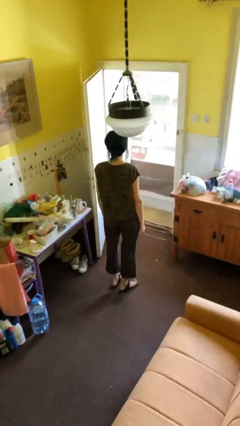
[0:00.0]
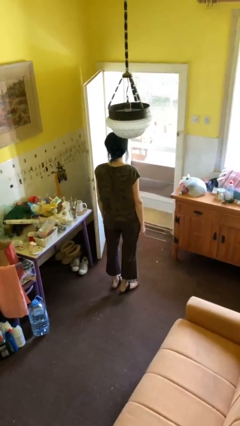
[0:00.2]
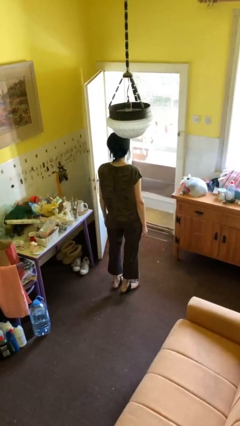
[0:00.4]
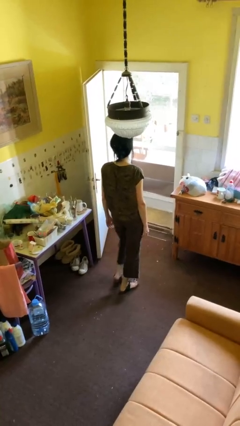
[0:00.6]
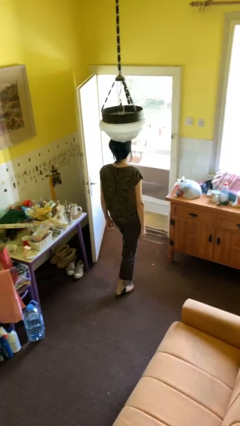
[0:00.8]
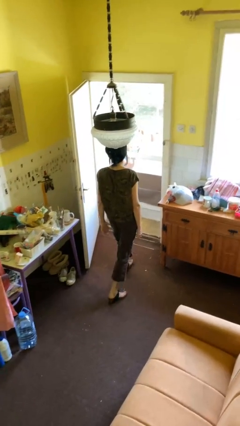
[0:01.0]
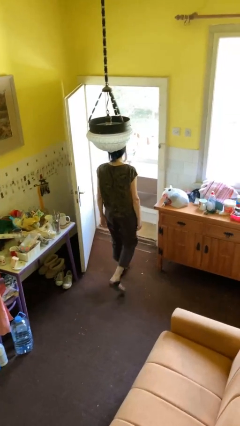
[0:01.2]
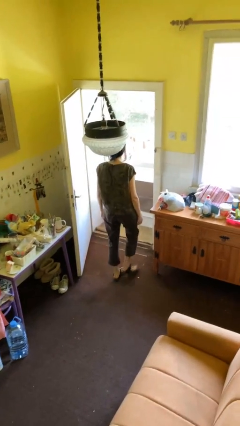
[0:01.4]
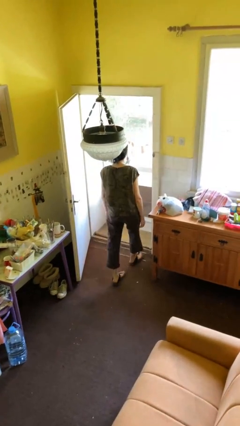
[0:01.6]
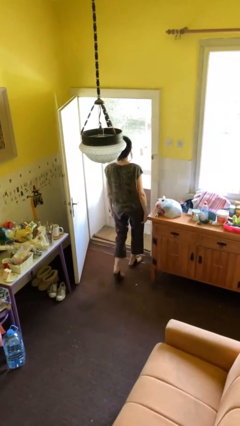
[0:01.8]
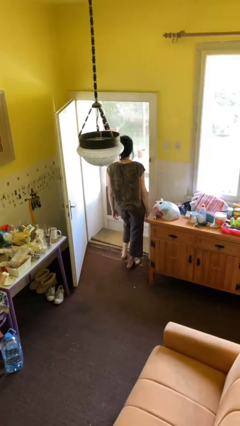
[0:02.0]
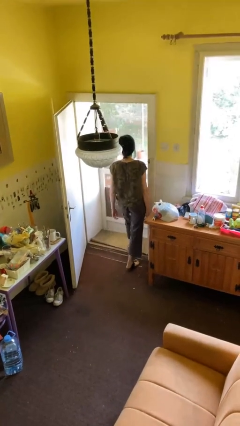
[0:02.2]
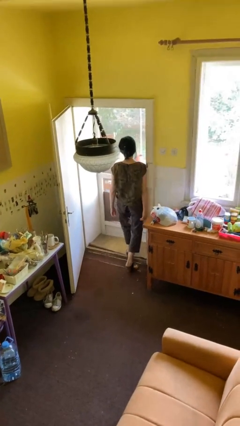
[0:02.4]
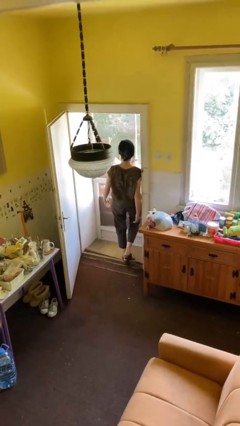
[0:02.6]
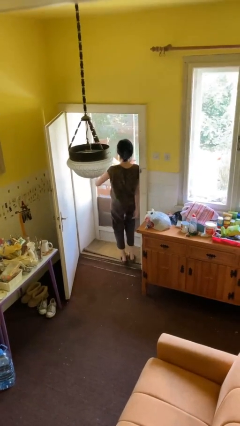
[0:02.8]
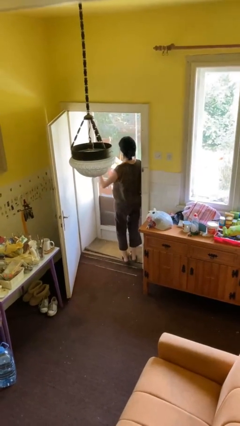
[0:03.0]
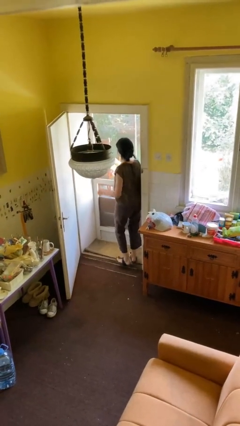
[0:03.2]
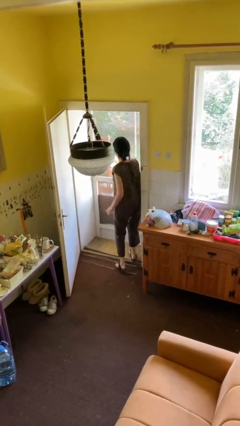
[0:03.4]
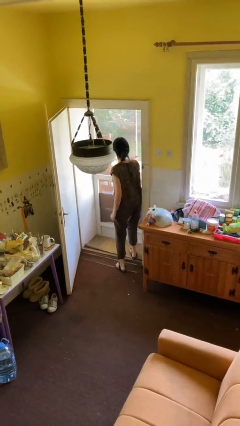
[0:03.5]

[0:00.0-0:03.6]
person bumps into wall

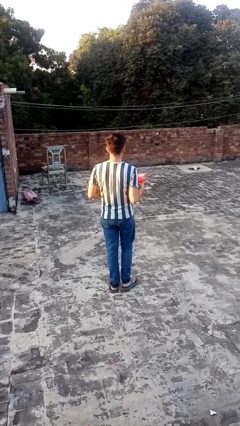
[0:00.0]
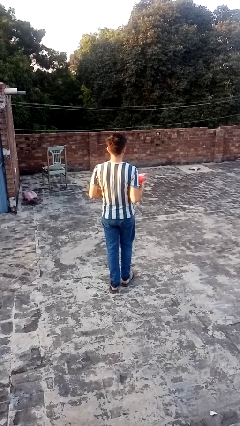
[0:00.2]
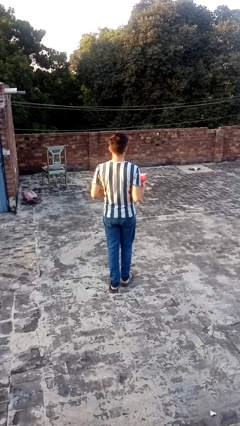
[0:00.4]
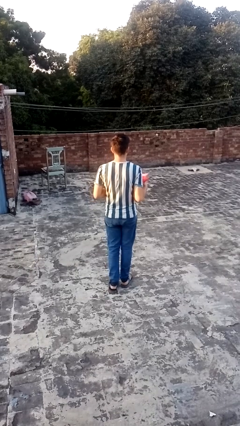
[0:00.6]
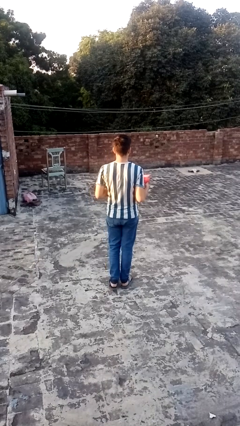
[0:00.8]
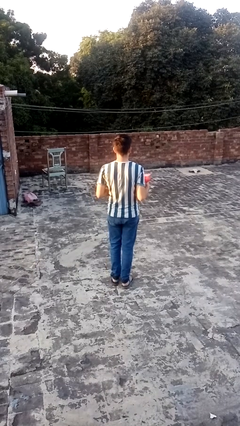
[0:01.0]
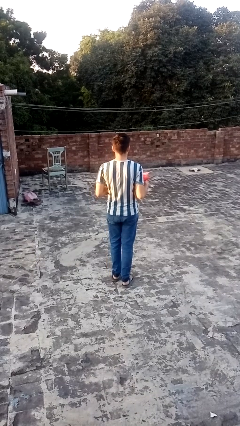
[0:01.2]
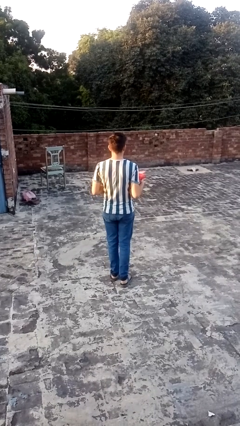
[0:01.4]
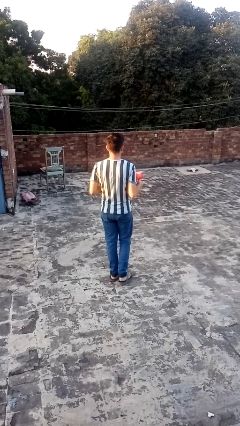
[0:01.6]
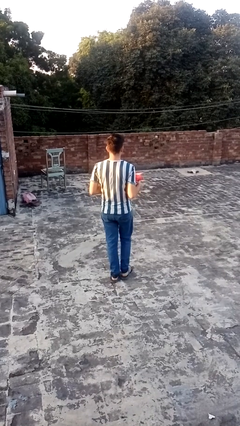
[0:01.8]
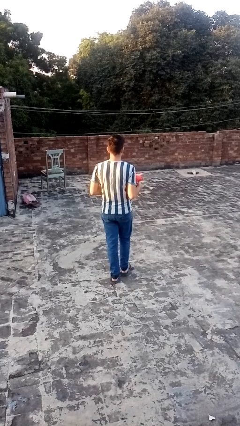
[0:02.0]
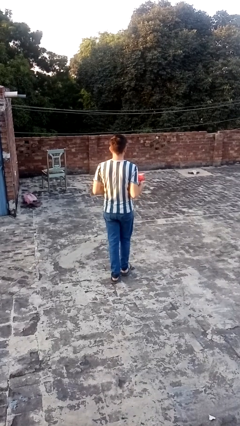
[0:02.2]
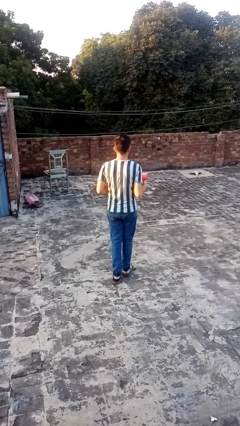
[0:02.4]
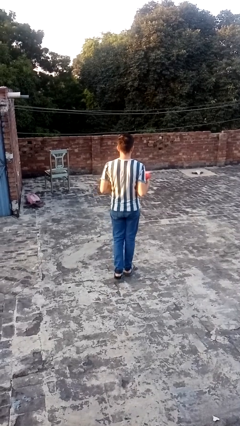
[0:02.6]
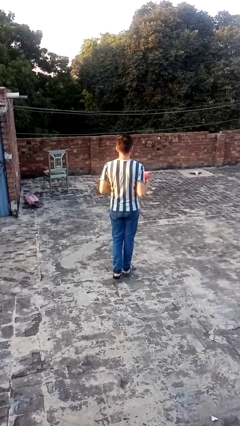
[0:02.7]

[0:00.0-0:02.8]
person carries laundry basket

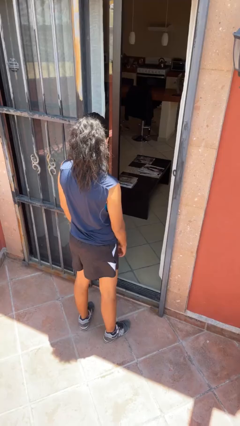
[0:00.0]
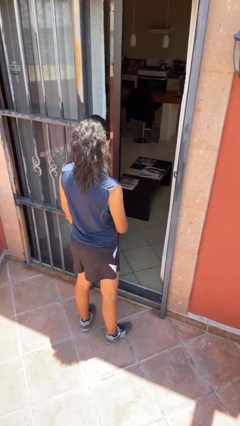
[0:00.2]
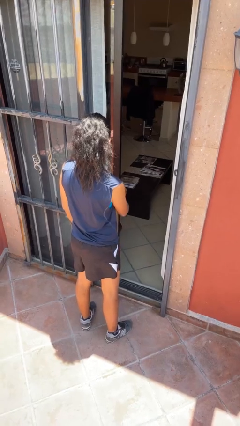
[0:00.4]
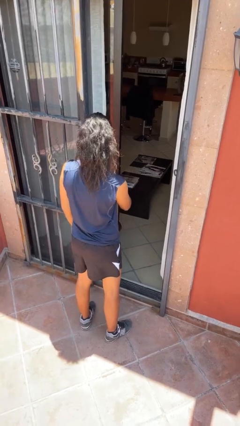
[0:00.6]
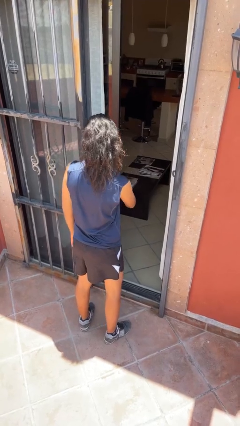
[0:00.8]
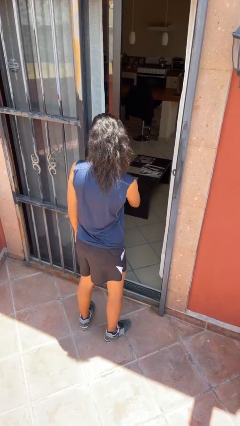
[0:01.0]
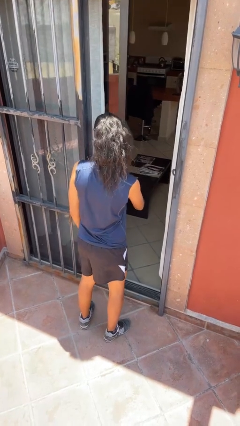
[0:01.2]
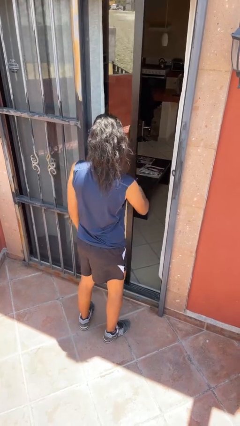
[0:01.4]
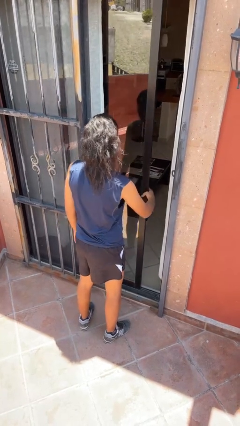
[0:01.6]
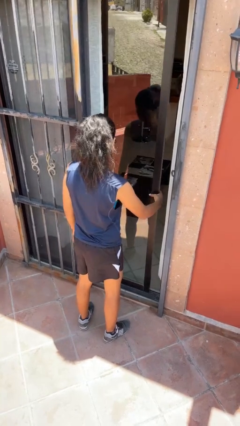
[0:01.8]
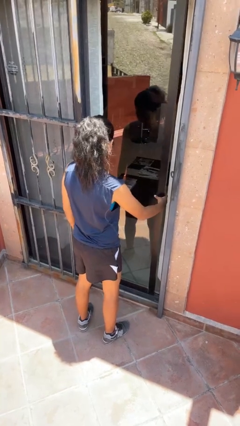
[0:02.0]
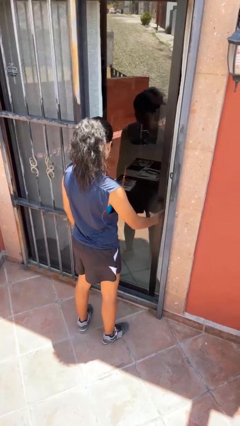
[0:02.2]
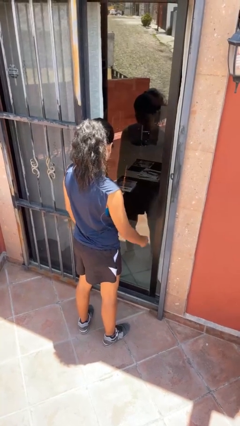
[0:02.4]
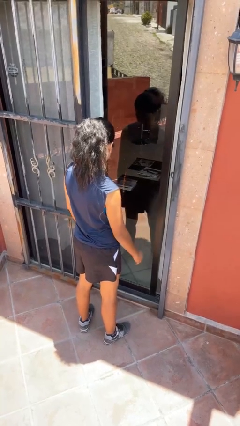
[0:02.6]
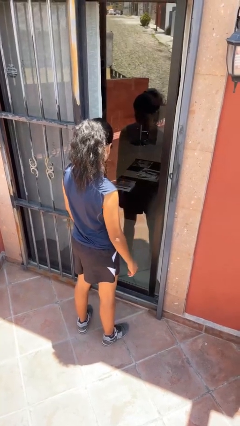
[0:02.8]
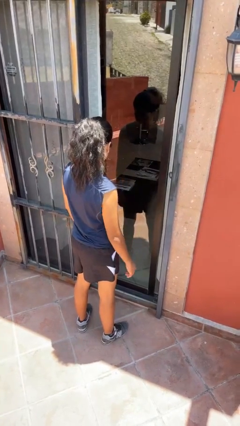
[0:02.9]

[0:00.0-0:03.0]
person closes sliding door

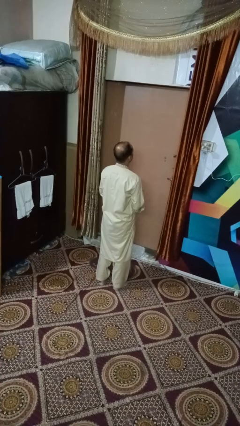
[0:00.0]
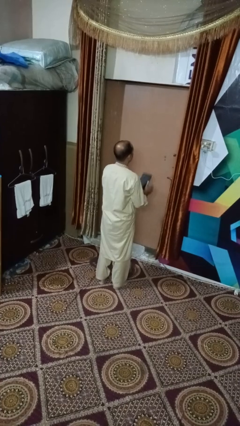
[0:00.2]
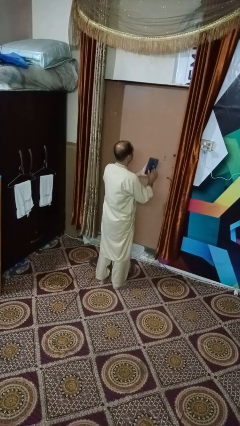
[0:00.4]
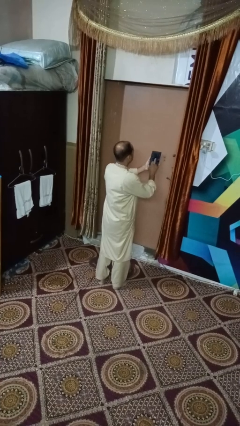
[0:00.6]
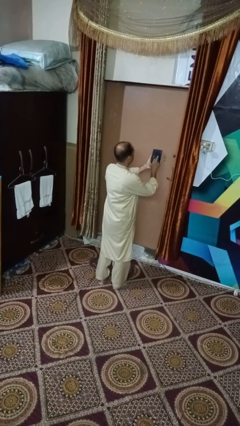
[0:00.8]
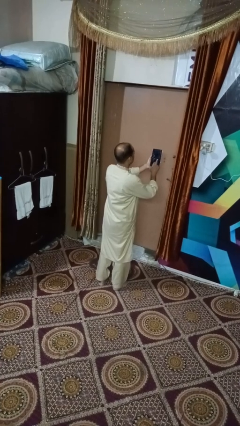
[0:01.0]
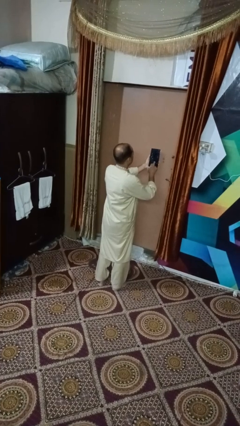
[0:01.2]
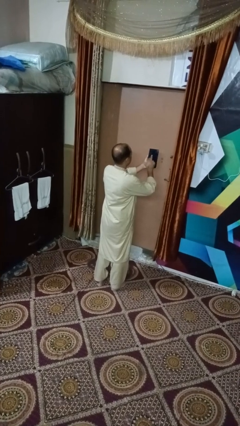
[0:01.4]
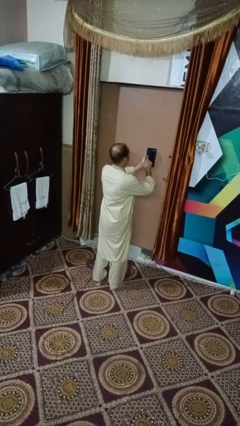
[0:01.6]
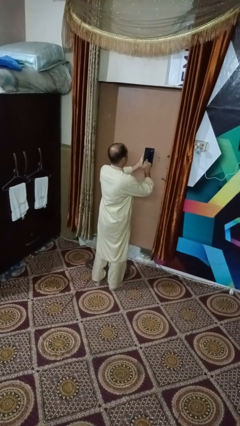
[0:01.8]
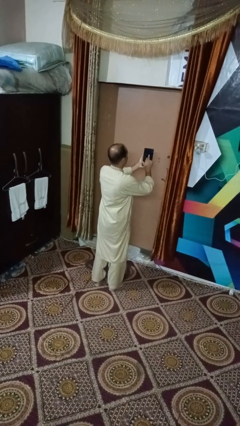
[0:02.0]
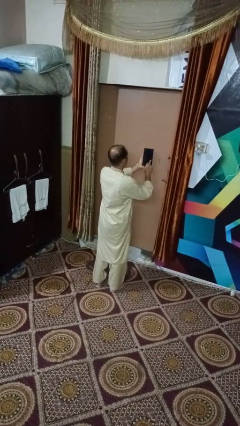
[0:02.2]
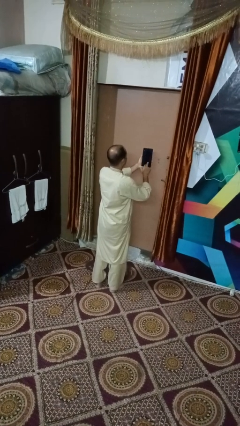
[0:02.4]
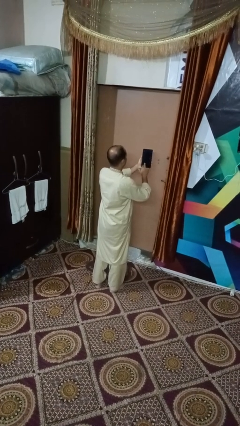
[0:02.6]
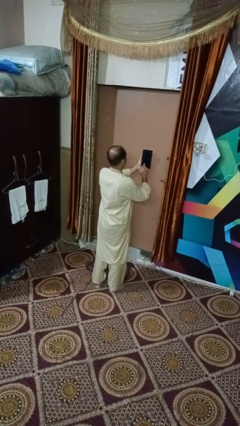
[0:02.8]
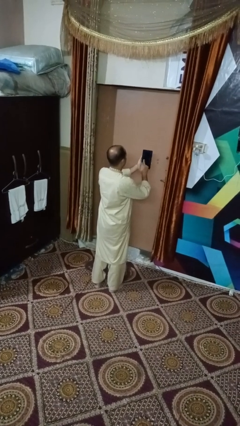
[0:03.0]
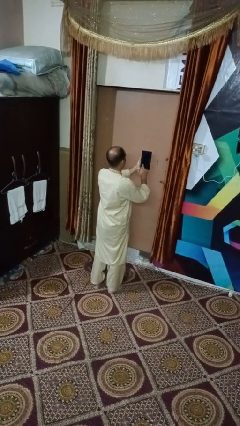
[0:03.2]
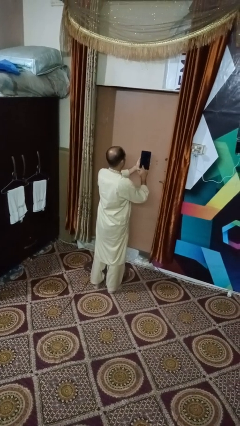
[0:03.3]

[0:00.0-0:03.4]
person interacts with tablet

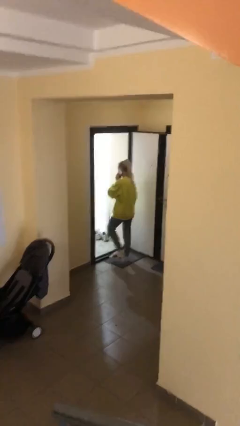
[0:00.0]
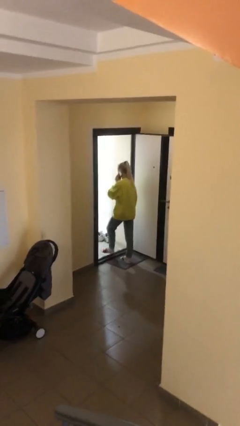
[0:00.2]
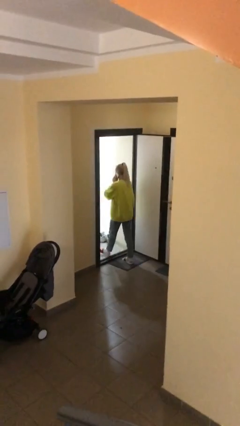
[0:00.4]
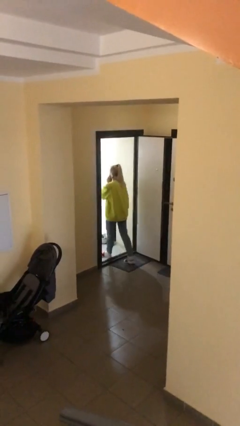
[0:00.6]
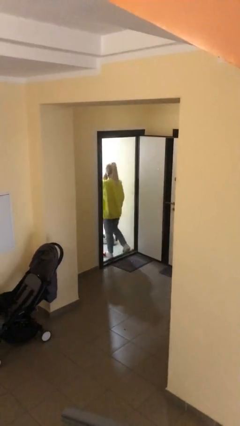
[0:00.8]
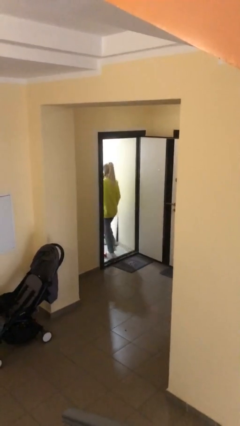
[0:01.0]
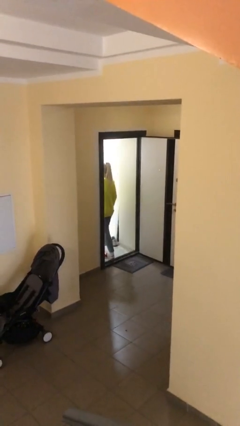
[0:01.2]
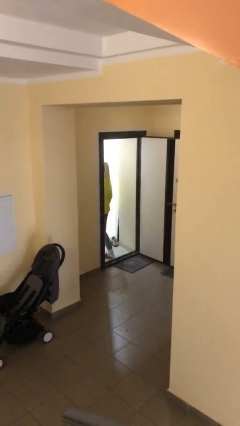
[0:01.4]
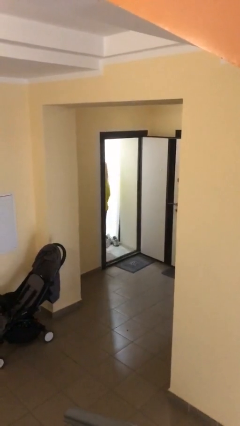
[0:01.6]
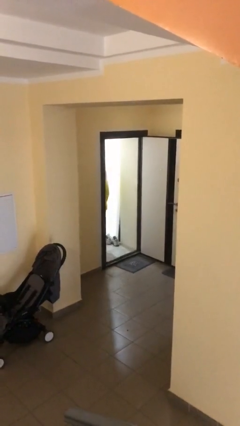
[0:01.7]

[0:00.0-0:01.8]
person exits scene through structure

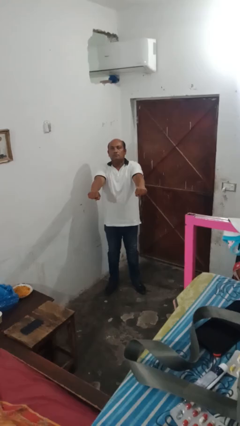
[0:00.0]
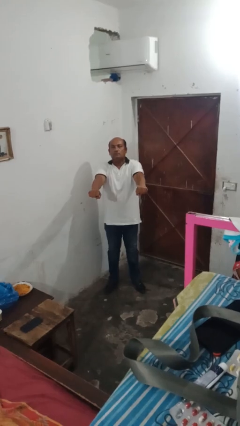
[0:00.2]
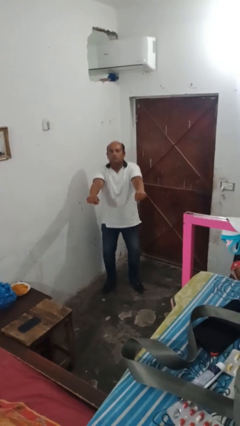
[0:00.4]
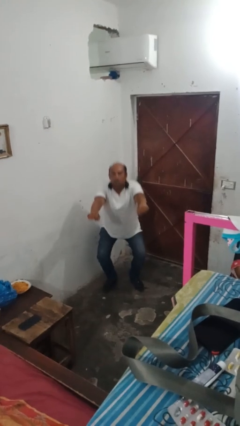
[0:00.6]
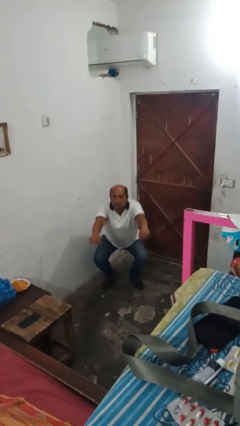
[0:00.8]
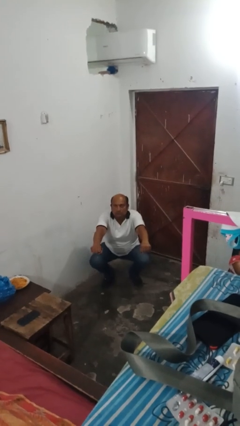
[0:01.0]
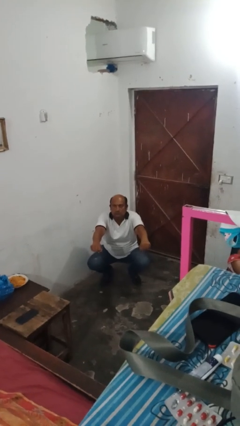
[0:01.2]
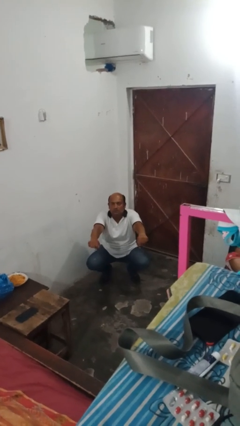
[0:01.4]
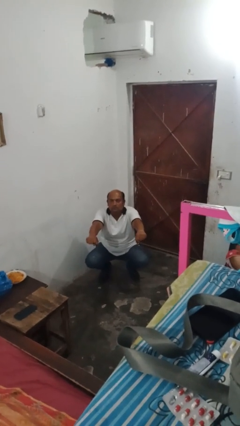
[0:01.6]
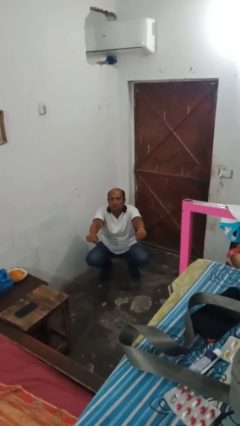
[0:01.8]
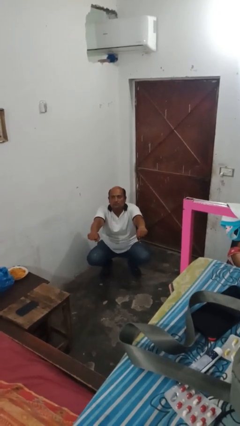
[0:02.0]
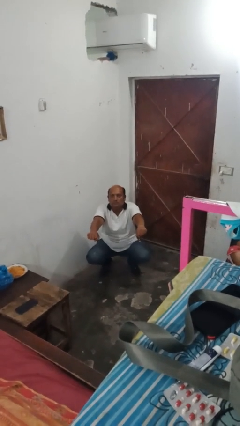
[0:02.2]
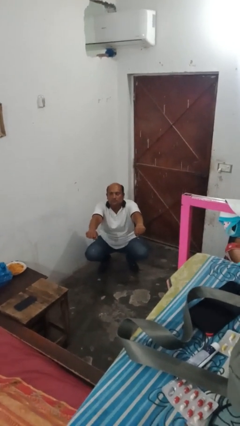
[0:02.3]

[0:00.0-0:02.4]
person squats

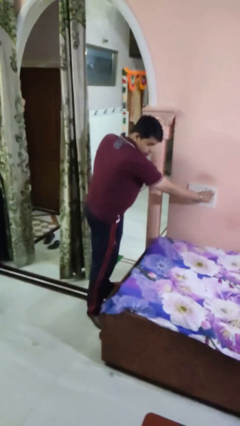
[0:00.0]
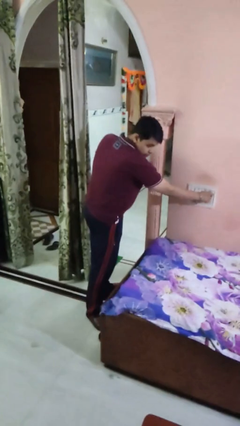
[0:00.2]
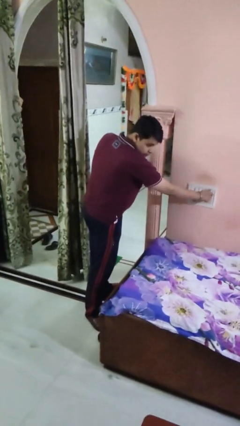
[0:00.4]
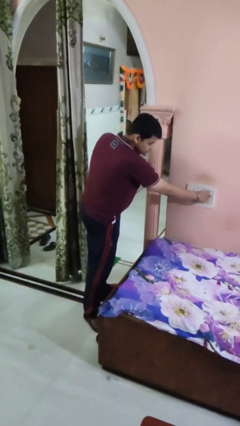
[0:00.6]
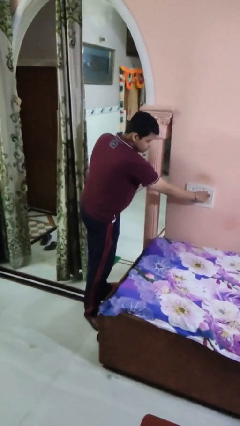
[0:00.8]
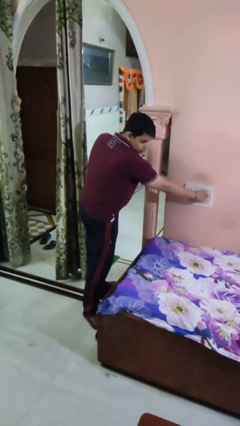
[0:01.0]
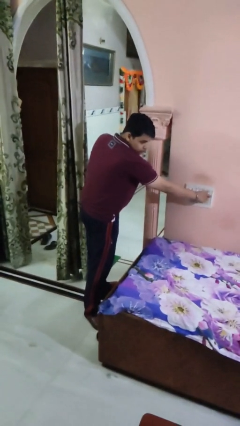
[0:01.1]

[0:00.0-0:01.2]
person adjusts thermostat
